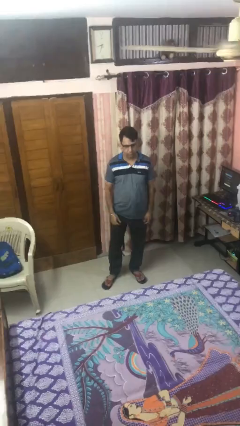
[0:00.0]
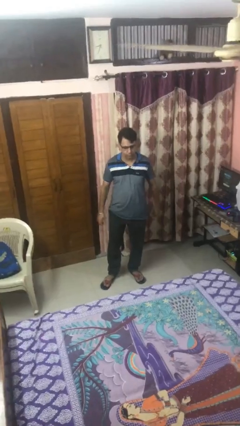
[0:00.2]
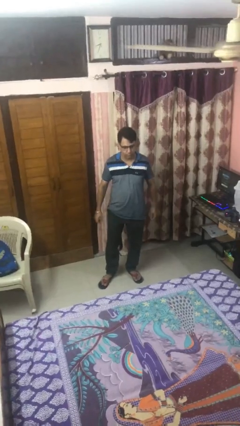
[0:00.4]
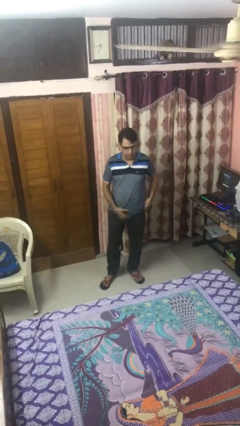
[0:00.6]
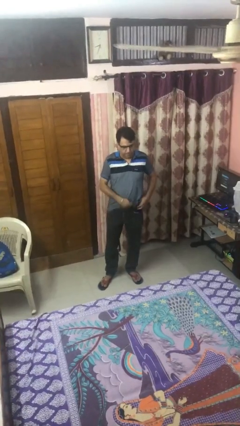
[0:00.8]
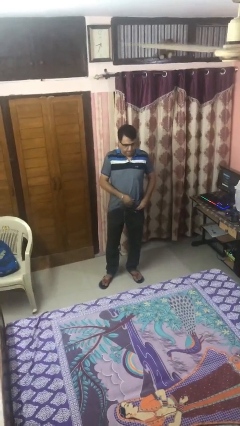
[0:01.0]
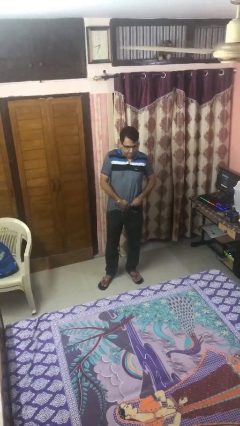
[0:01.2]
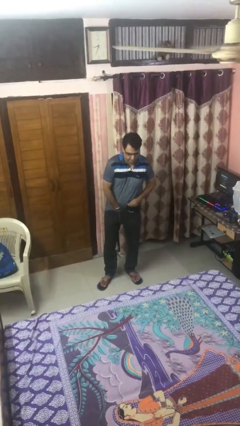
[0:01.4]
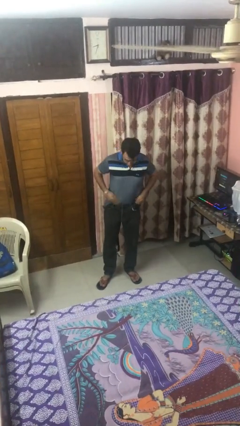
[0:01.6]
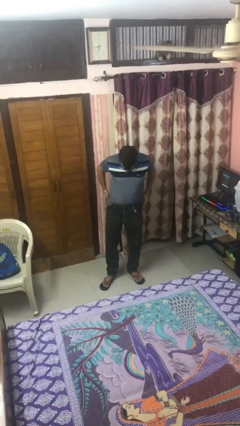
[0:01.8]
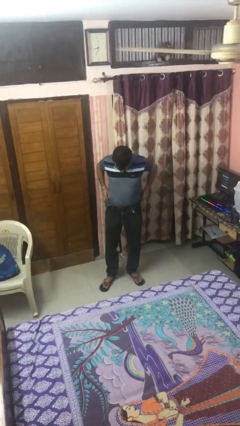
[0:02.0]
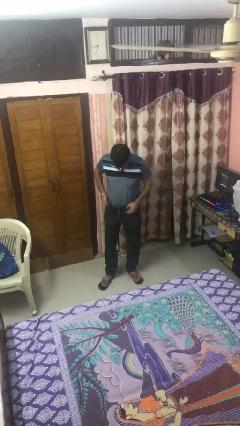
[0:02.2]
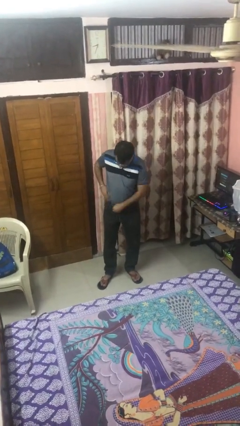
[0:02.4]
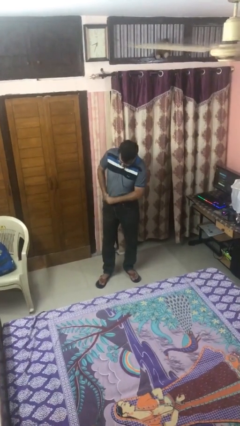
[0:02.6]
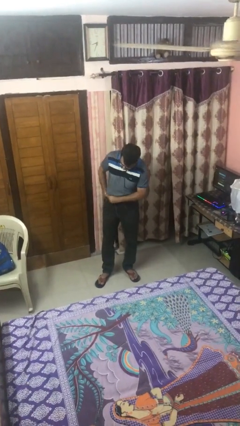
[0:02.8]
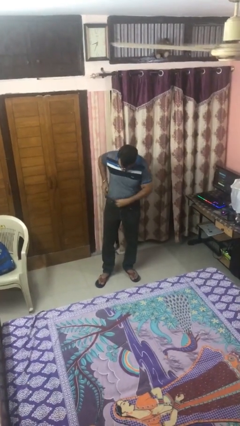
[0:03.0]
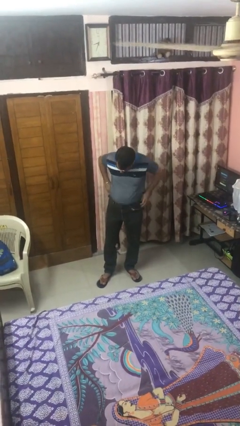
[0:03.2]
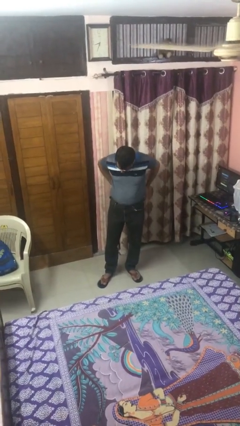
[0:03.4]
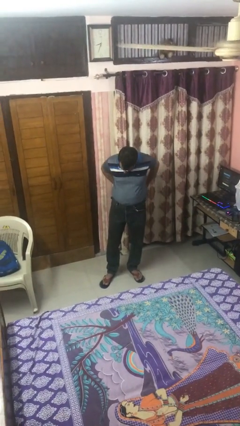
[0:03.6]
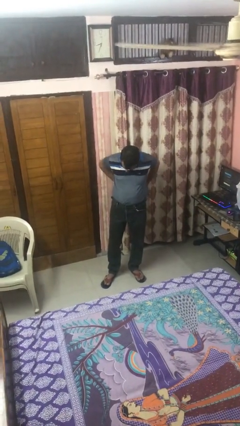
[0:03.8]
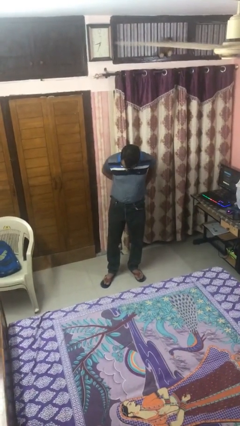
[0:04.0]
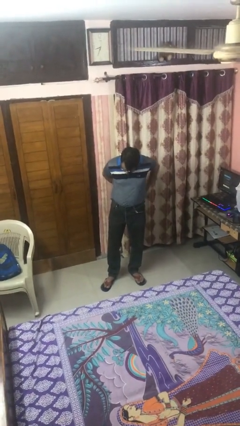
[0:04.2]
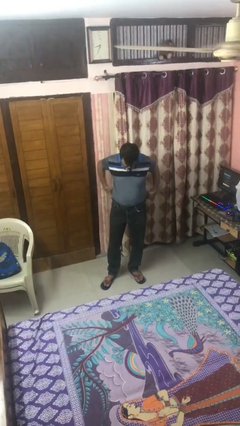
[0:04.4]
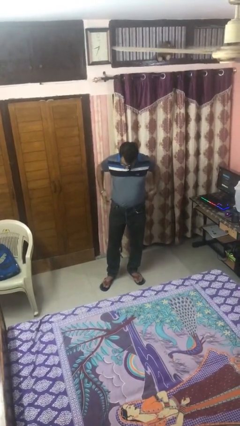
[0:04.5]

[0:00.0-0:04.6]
person tucks in shirt

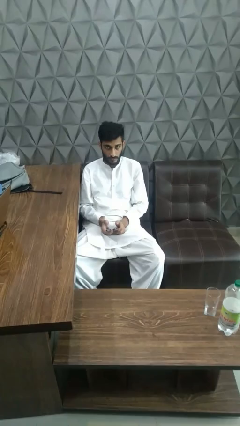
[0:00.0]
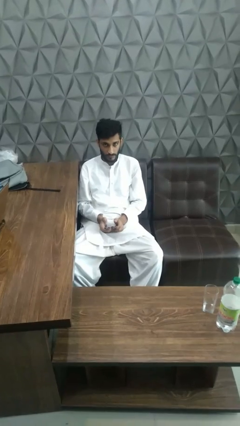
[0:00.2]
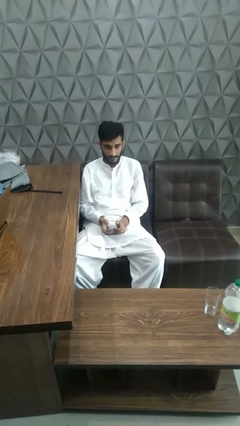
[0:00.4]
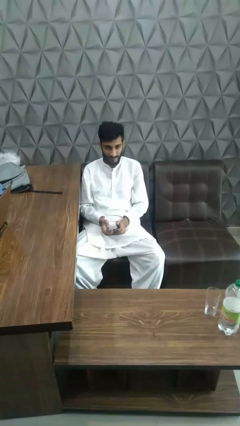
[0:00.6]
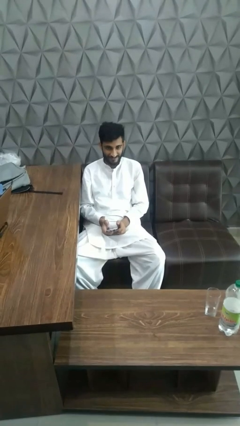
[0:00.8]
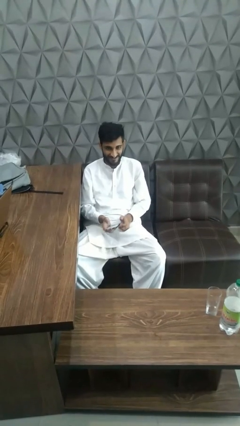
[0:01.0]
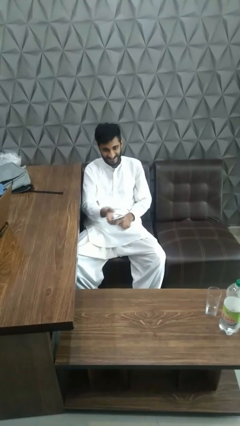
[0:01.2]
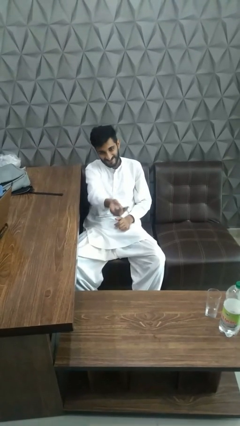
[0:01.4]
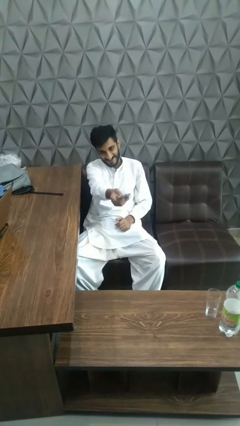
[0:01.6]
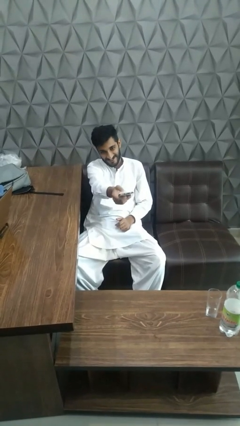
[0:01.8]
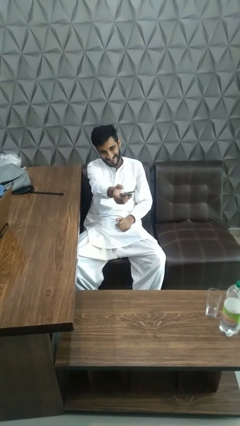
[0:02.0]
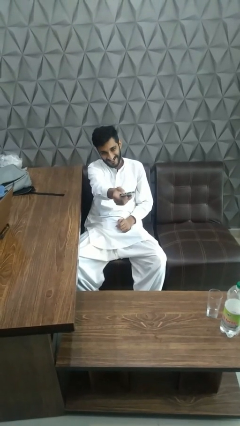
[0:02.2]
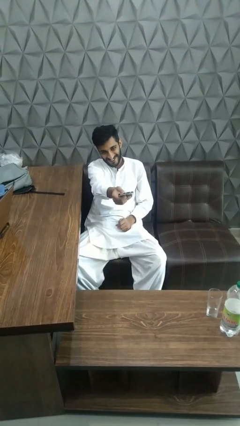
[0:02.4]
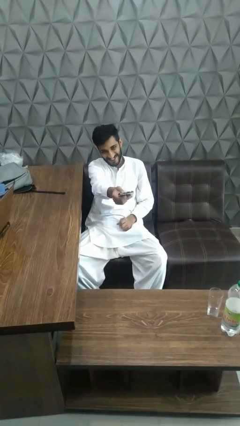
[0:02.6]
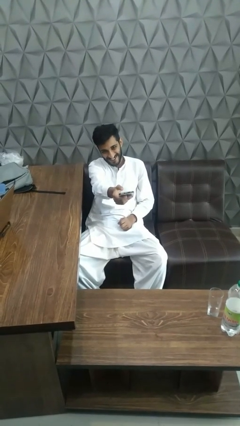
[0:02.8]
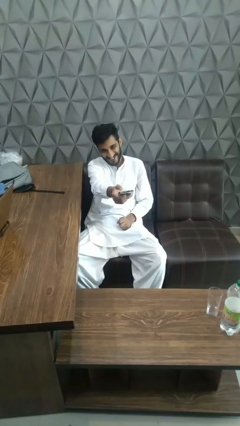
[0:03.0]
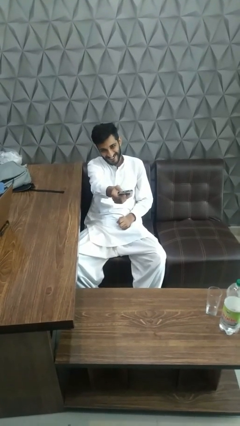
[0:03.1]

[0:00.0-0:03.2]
person uses television remote

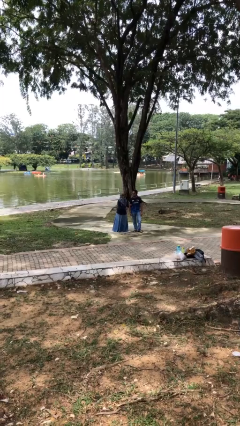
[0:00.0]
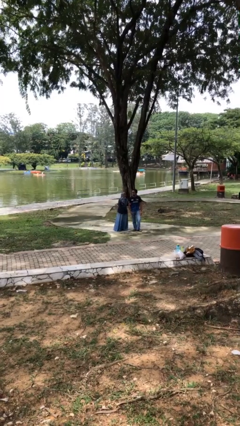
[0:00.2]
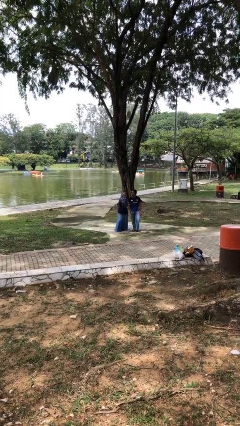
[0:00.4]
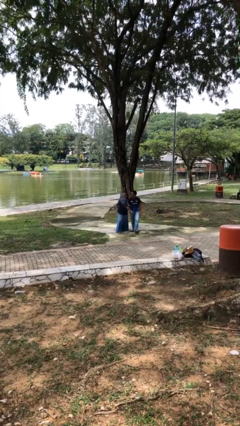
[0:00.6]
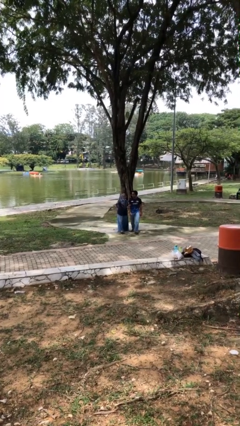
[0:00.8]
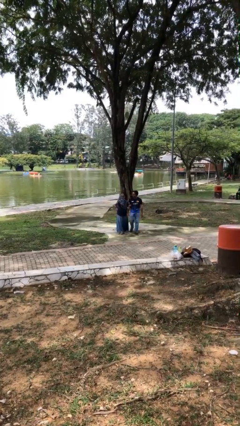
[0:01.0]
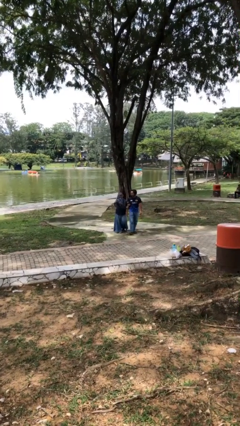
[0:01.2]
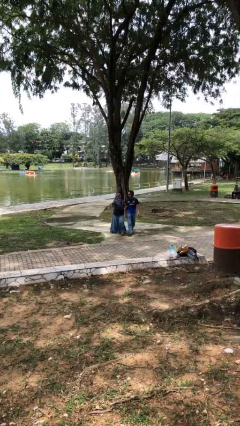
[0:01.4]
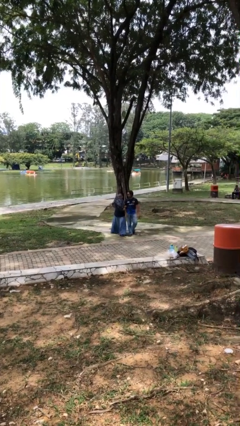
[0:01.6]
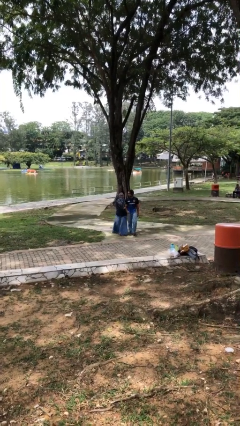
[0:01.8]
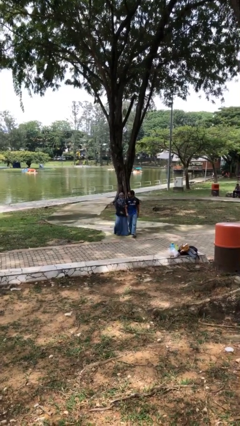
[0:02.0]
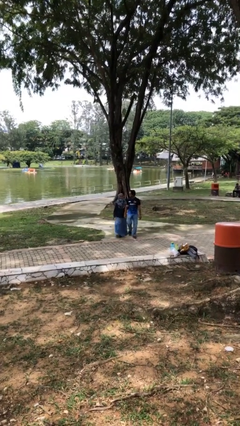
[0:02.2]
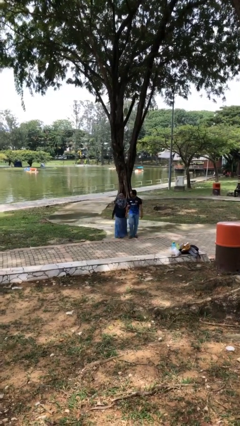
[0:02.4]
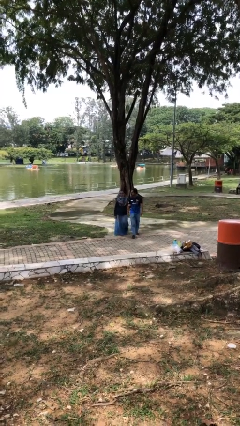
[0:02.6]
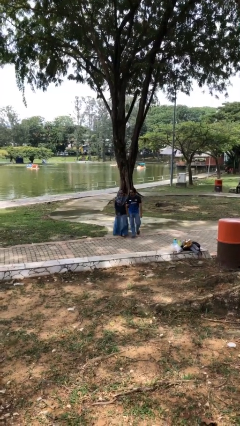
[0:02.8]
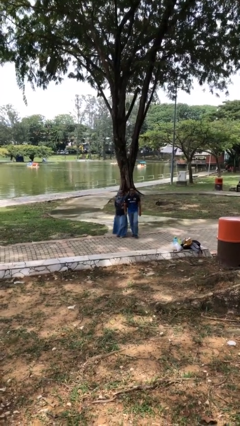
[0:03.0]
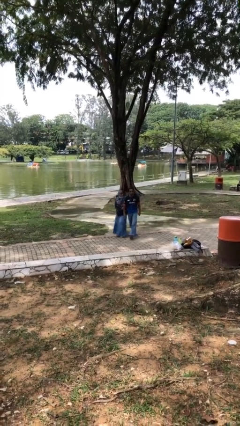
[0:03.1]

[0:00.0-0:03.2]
person holds hand

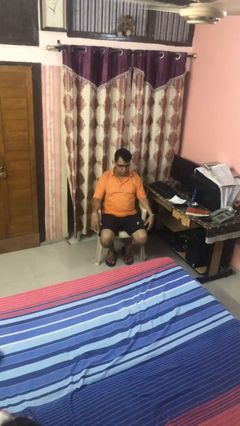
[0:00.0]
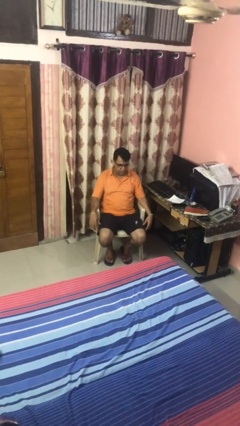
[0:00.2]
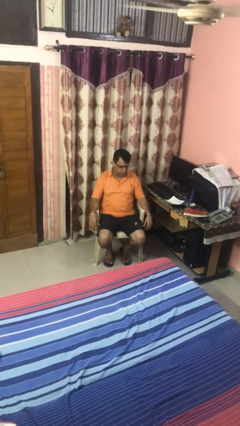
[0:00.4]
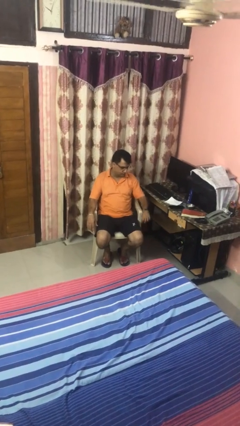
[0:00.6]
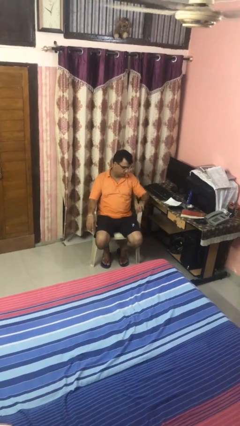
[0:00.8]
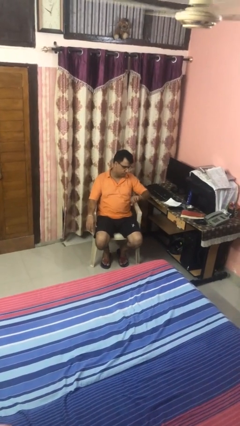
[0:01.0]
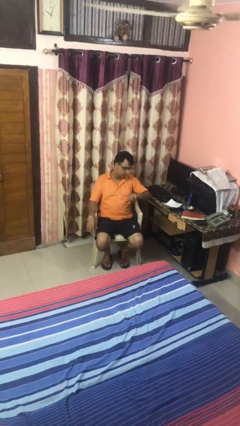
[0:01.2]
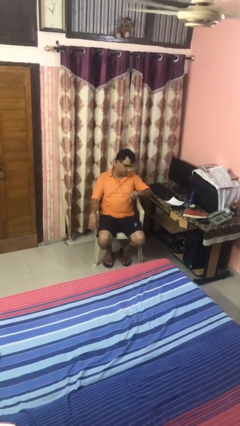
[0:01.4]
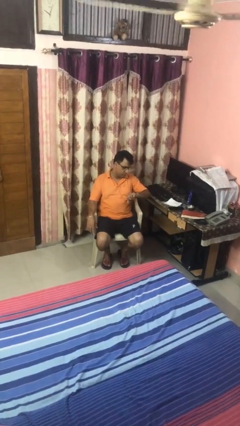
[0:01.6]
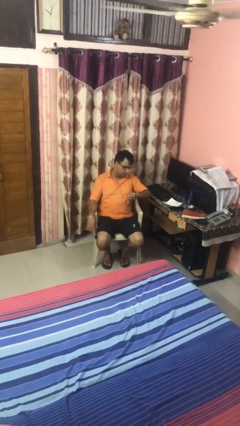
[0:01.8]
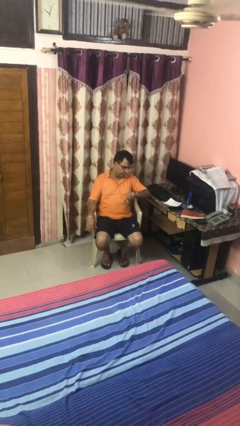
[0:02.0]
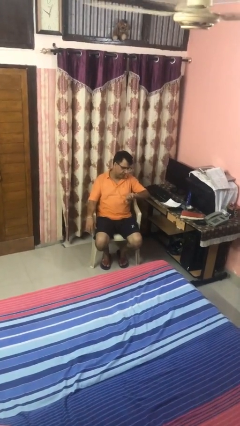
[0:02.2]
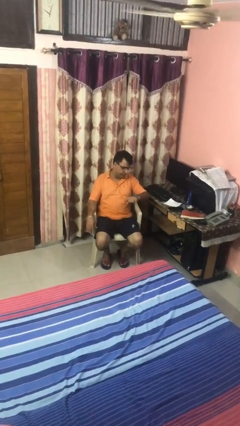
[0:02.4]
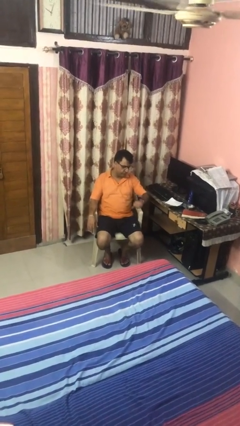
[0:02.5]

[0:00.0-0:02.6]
person looks at wristwatch

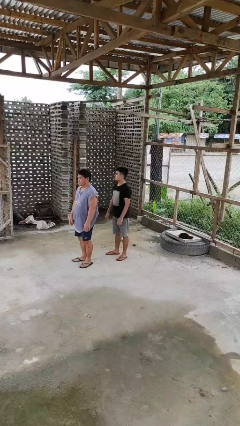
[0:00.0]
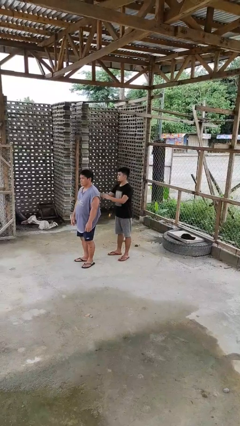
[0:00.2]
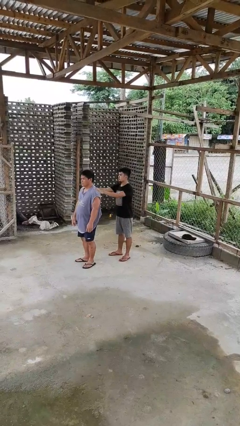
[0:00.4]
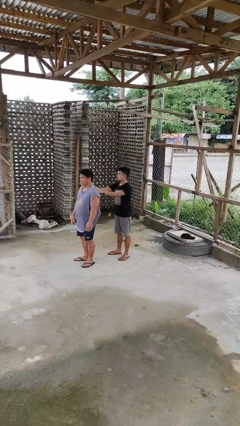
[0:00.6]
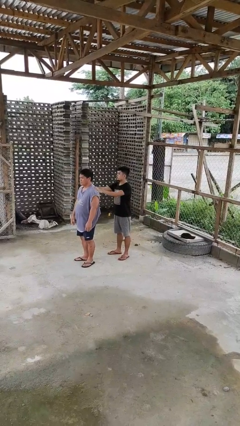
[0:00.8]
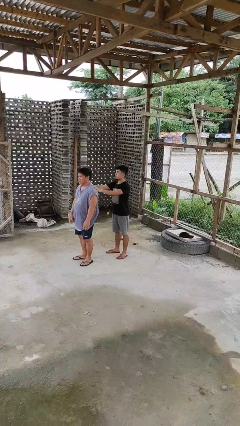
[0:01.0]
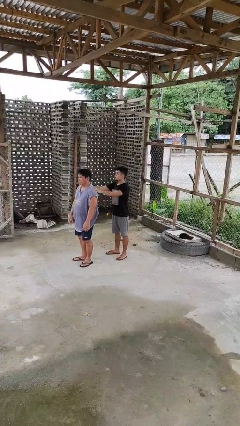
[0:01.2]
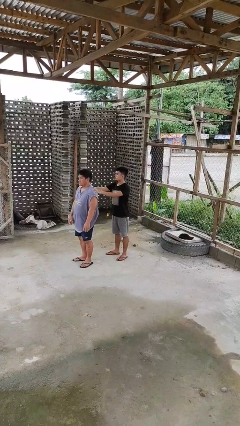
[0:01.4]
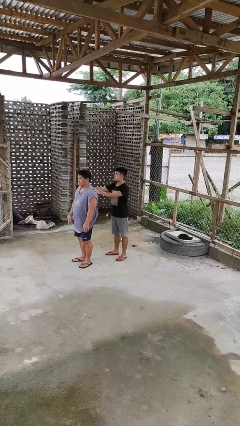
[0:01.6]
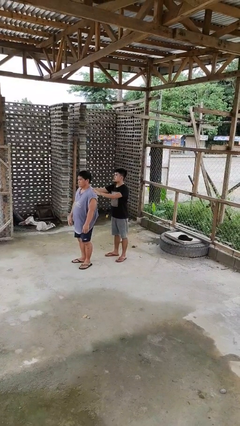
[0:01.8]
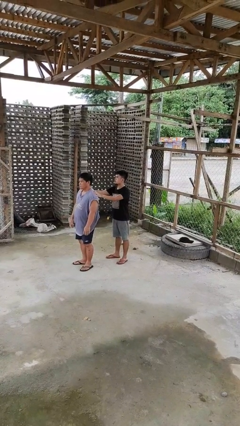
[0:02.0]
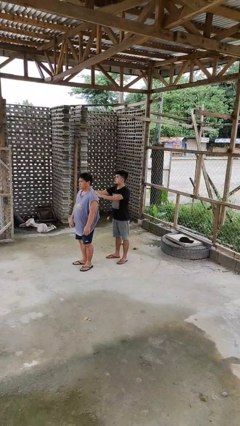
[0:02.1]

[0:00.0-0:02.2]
person grabs person by shoulder

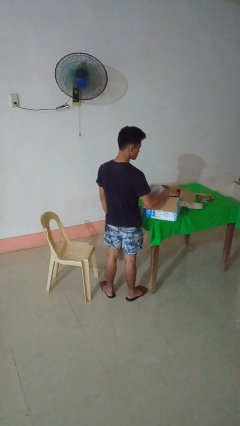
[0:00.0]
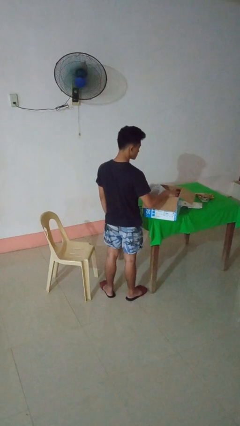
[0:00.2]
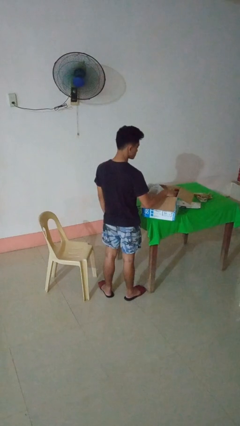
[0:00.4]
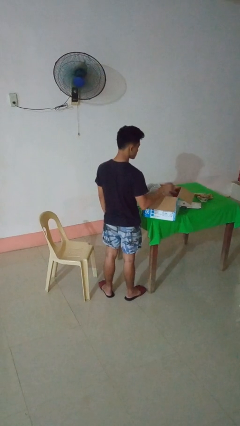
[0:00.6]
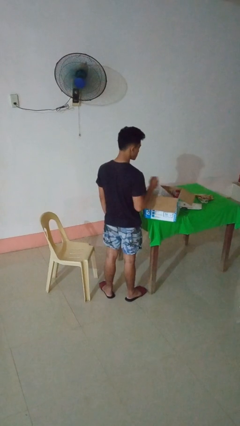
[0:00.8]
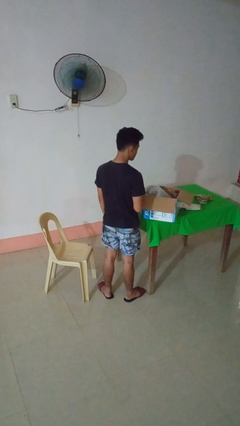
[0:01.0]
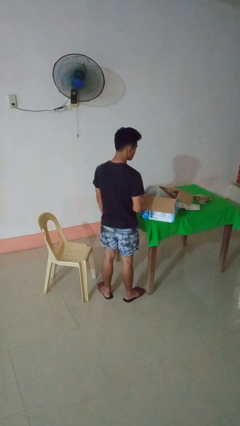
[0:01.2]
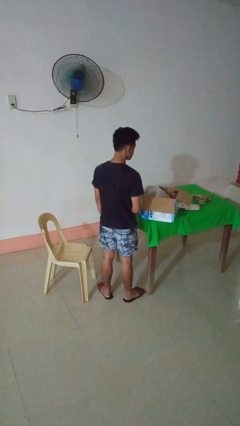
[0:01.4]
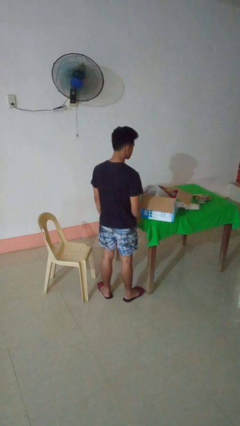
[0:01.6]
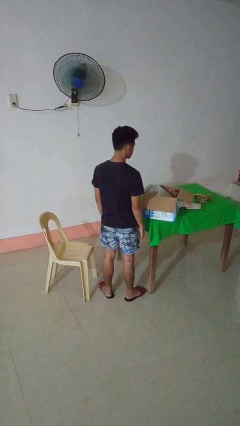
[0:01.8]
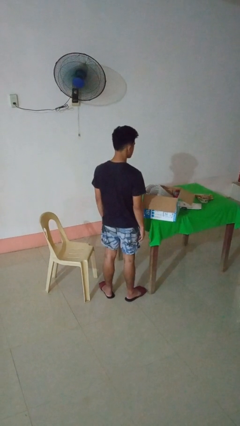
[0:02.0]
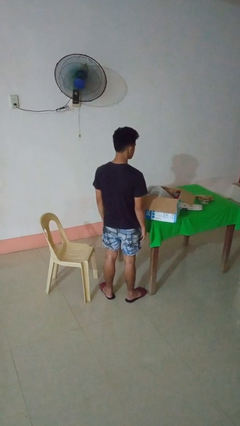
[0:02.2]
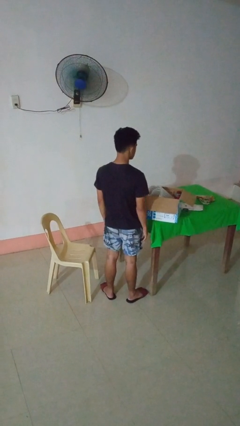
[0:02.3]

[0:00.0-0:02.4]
person puts object into box
